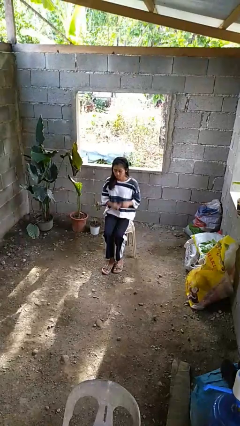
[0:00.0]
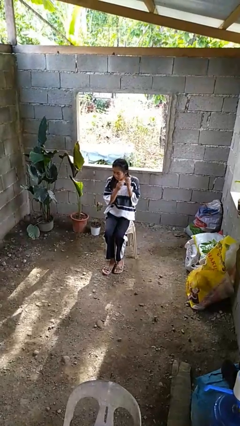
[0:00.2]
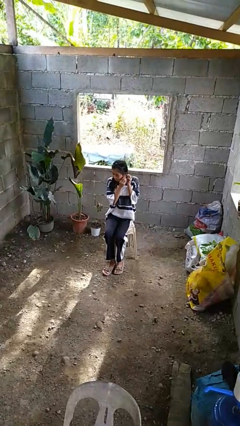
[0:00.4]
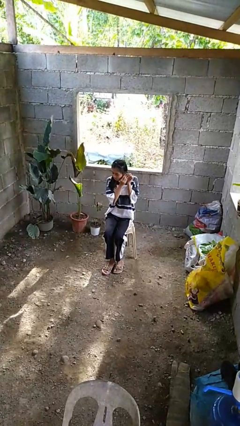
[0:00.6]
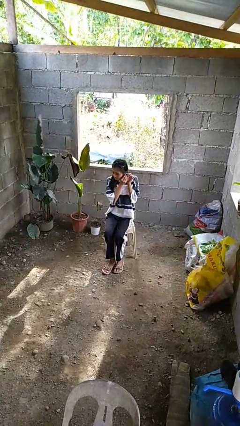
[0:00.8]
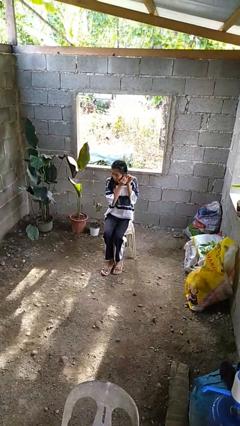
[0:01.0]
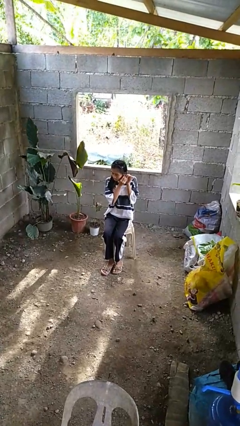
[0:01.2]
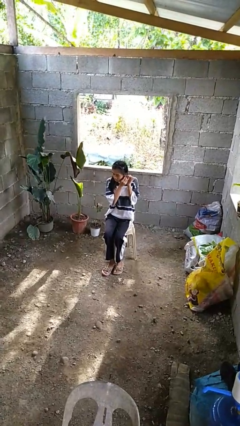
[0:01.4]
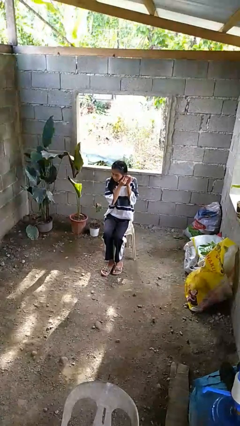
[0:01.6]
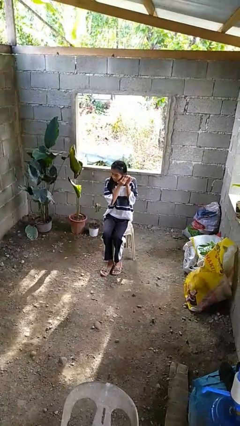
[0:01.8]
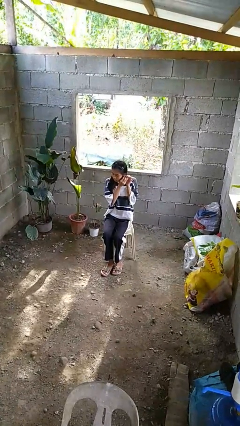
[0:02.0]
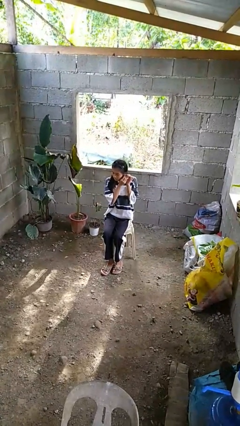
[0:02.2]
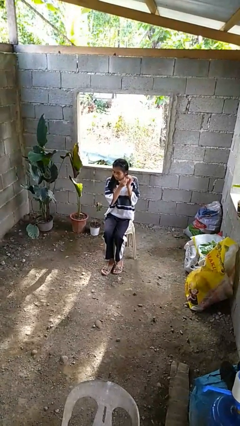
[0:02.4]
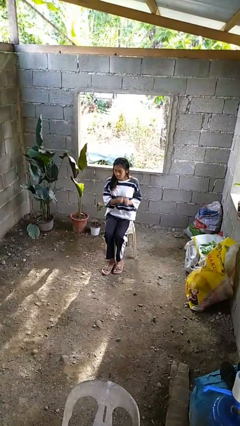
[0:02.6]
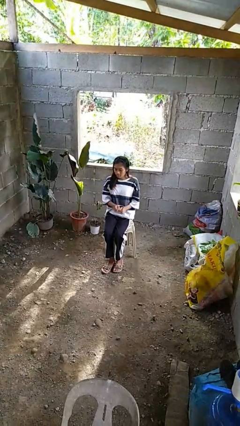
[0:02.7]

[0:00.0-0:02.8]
person puts on earrings

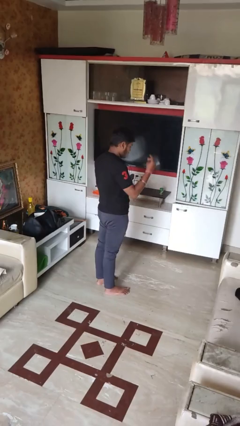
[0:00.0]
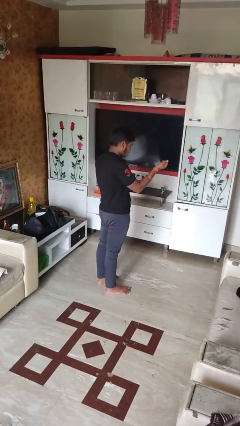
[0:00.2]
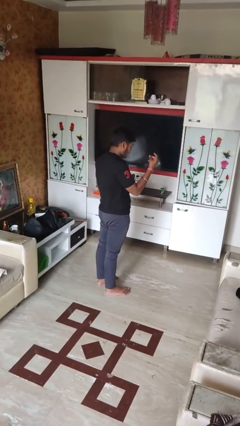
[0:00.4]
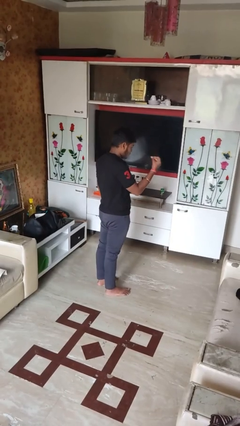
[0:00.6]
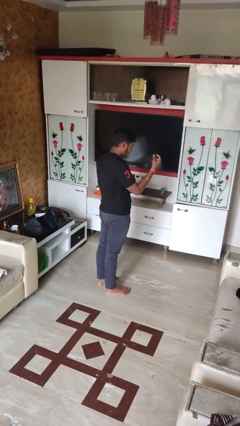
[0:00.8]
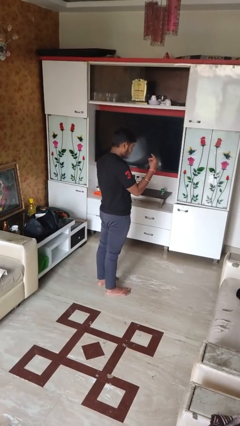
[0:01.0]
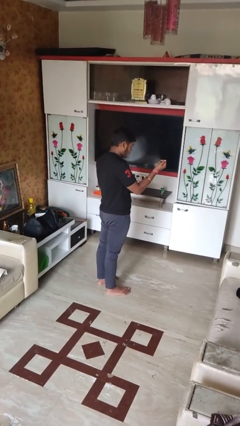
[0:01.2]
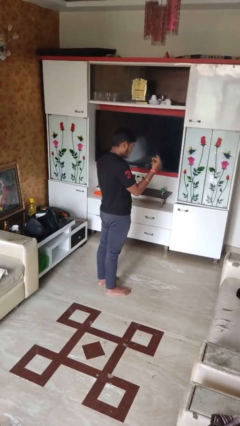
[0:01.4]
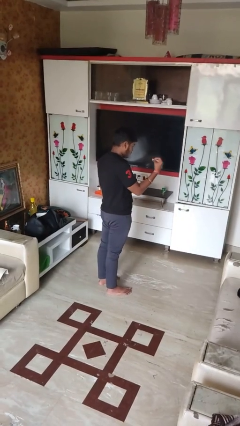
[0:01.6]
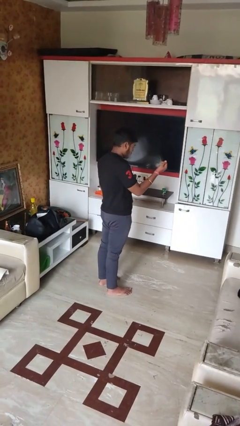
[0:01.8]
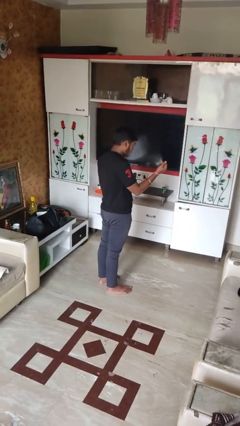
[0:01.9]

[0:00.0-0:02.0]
person snaps fingers

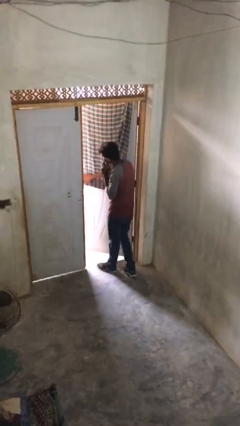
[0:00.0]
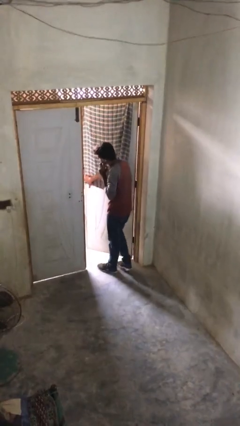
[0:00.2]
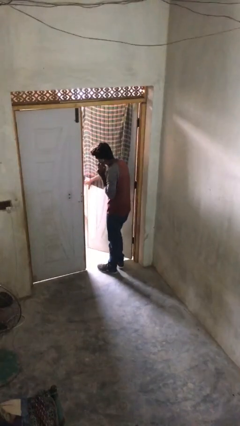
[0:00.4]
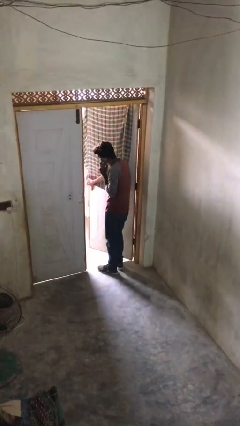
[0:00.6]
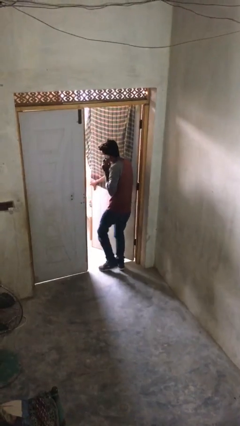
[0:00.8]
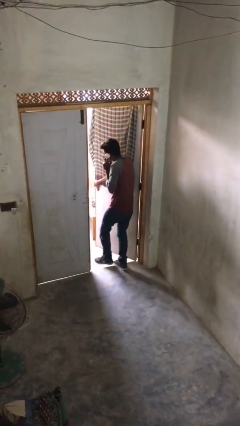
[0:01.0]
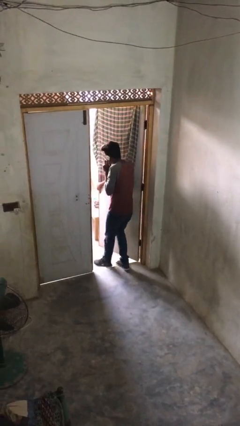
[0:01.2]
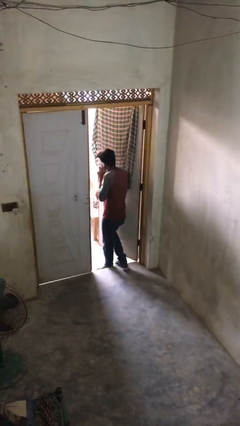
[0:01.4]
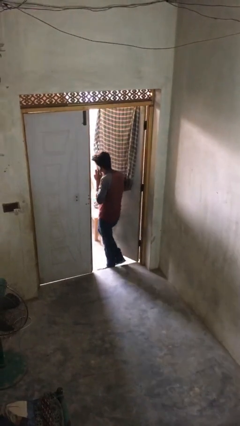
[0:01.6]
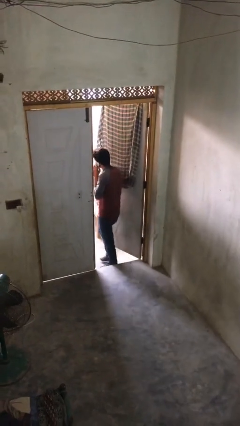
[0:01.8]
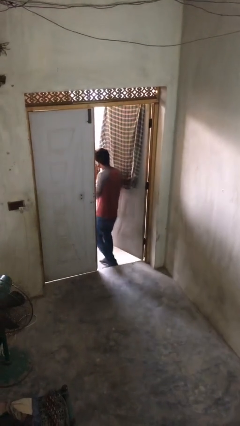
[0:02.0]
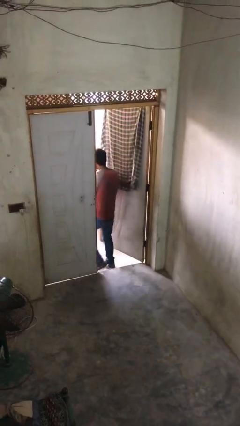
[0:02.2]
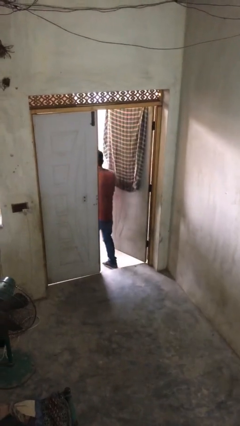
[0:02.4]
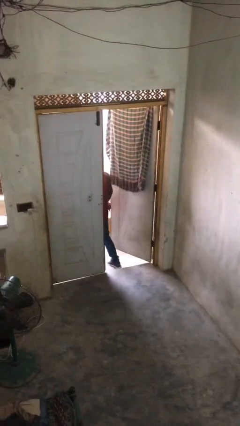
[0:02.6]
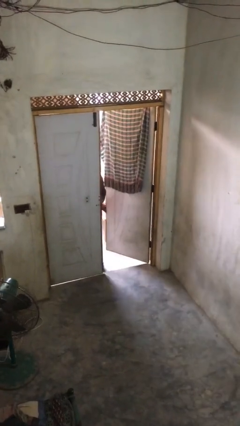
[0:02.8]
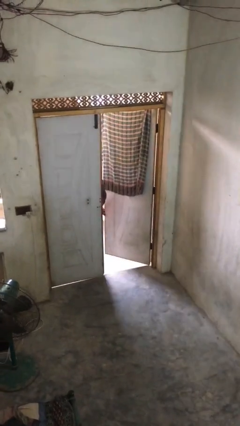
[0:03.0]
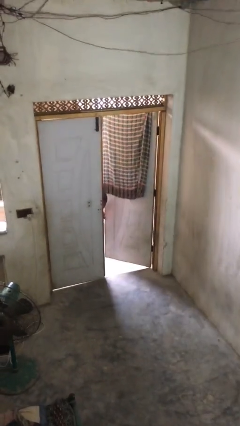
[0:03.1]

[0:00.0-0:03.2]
person exits scene through structure

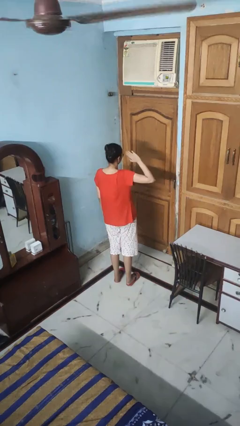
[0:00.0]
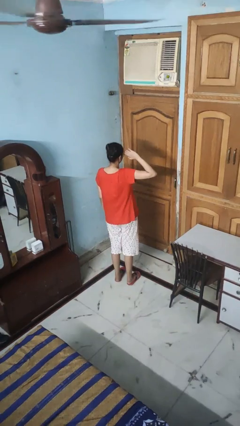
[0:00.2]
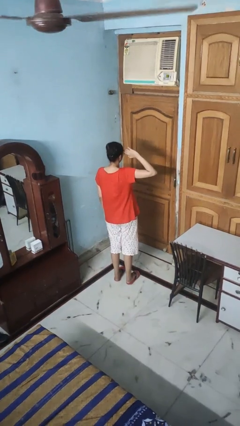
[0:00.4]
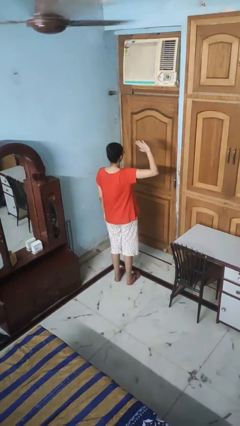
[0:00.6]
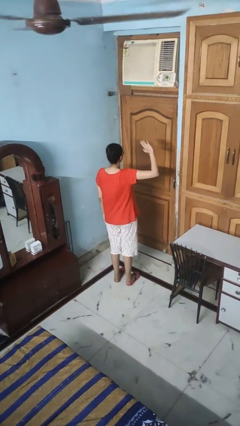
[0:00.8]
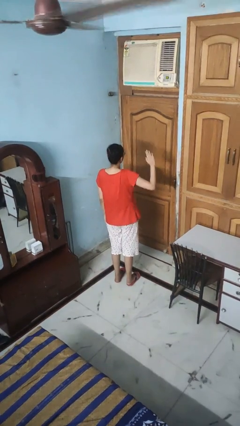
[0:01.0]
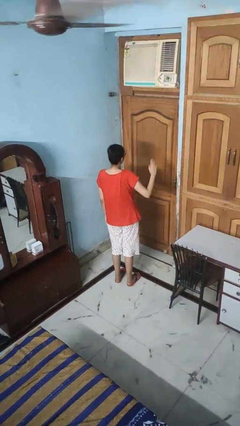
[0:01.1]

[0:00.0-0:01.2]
person salutes

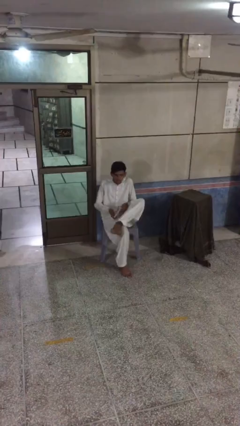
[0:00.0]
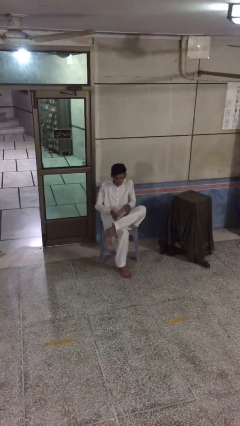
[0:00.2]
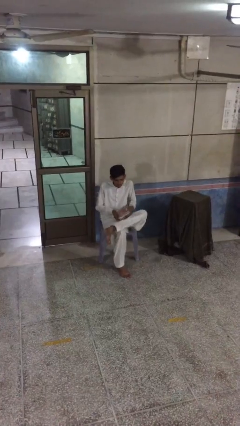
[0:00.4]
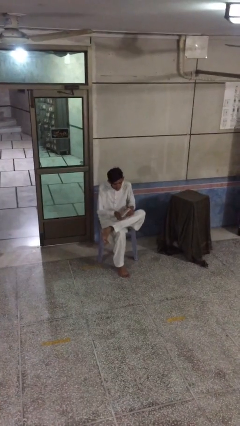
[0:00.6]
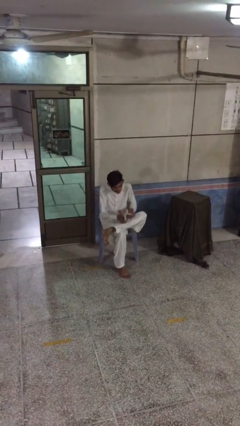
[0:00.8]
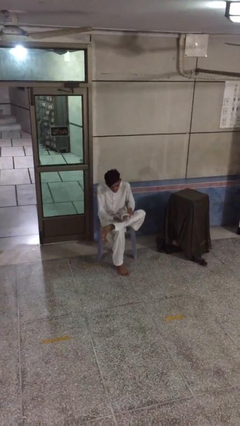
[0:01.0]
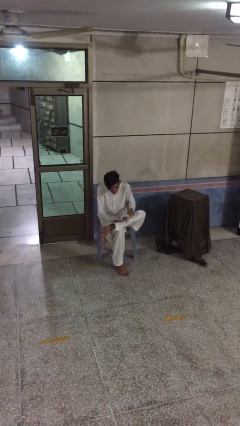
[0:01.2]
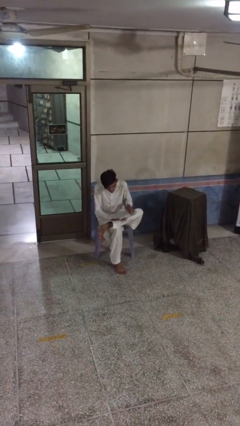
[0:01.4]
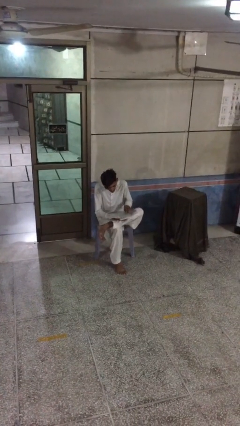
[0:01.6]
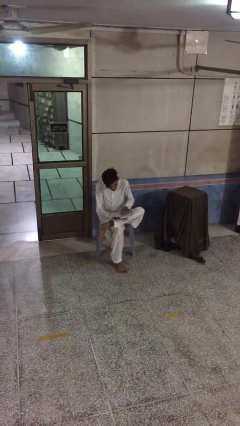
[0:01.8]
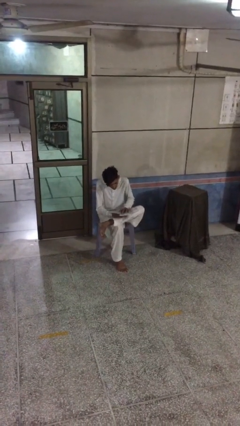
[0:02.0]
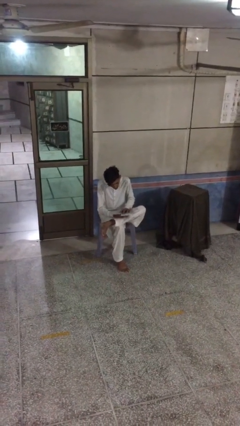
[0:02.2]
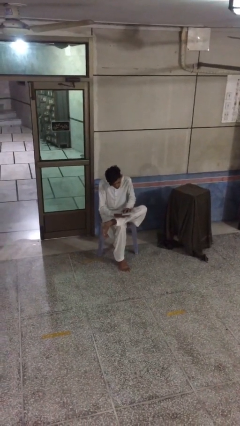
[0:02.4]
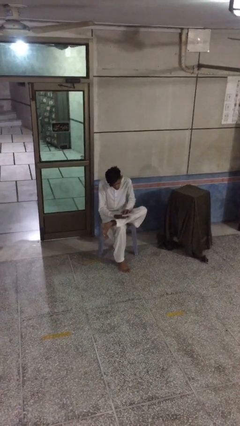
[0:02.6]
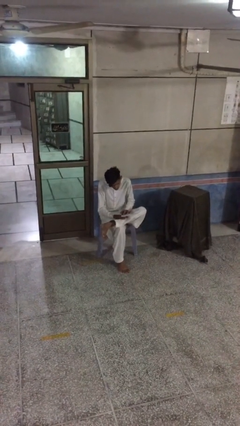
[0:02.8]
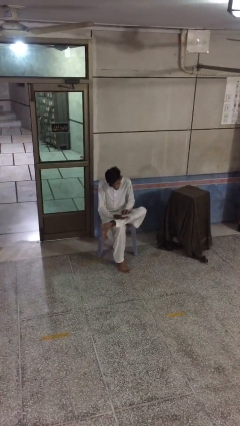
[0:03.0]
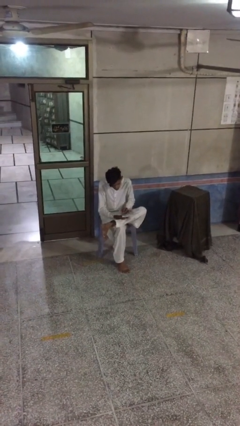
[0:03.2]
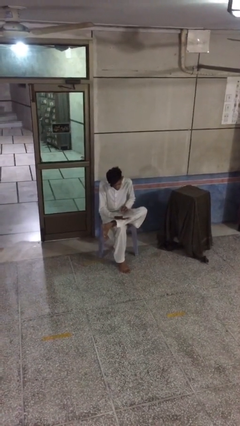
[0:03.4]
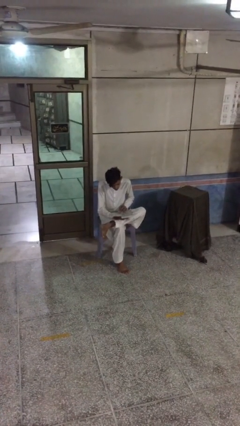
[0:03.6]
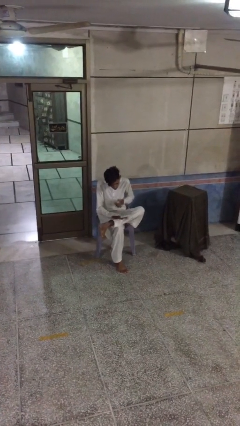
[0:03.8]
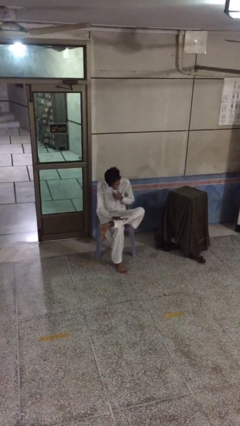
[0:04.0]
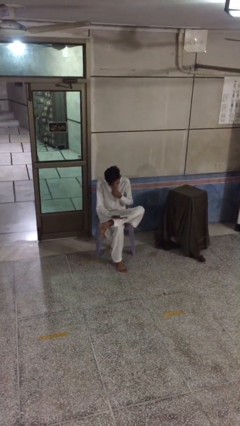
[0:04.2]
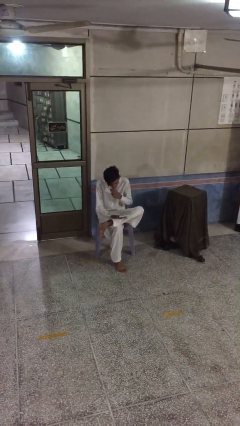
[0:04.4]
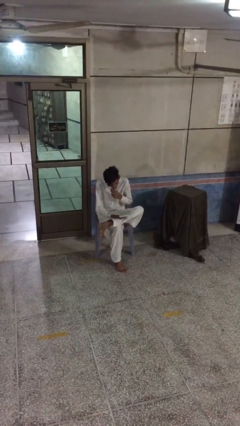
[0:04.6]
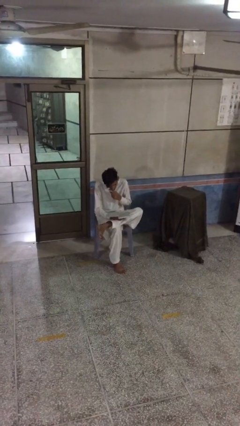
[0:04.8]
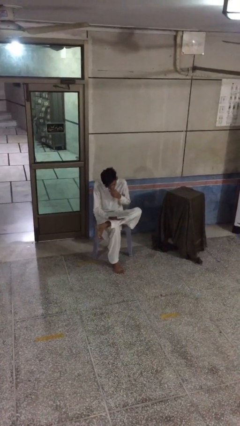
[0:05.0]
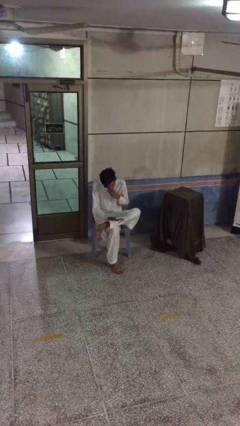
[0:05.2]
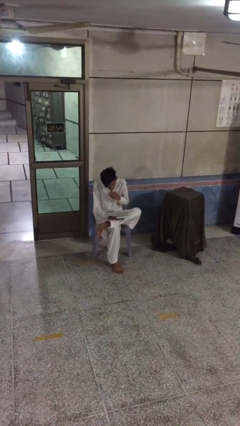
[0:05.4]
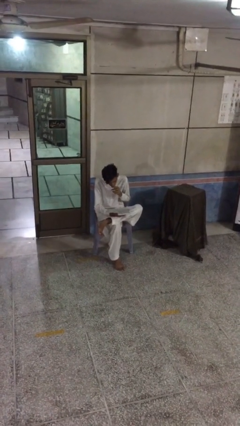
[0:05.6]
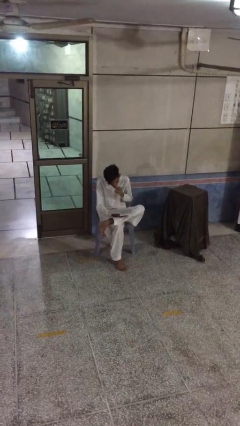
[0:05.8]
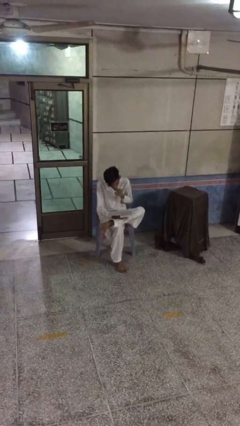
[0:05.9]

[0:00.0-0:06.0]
person reads document

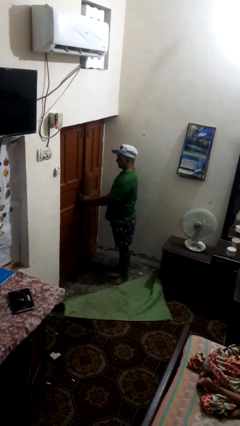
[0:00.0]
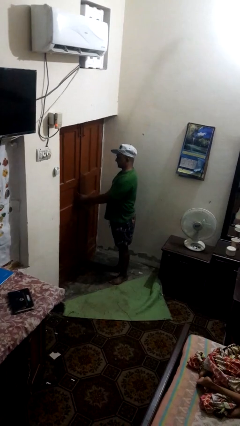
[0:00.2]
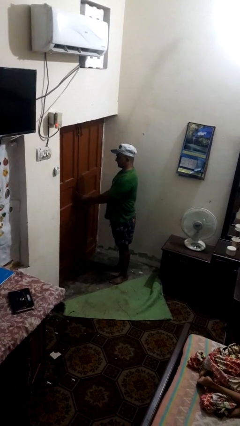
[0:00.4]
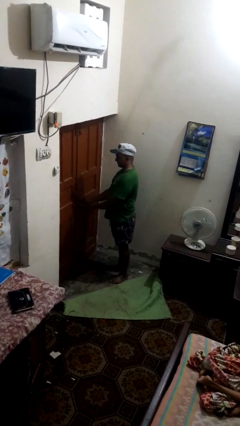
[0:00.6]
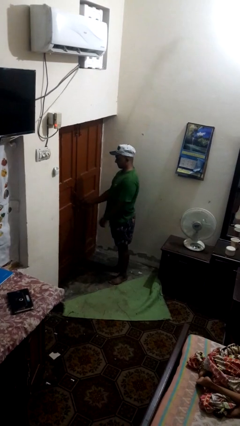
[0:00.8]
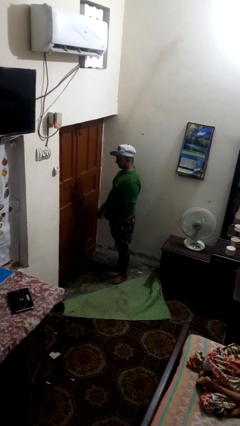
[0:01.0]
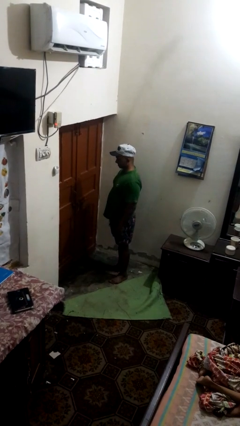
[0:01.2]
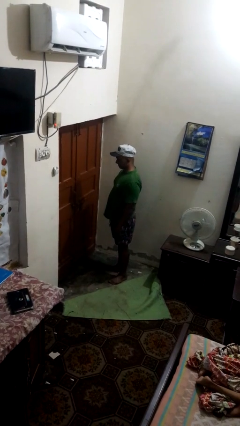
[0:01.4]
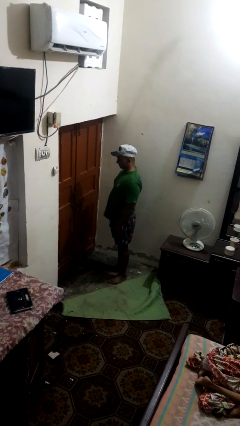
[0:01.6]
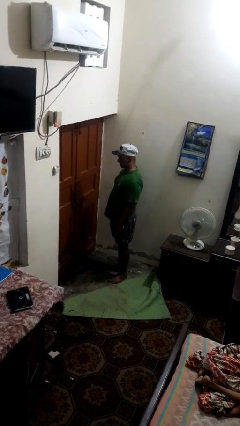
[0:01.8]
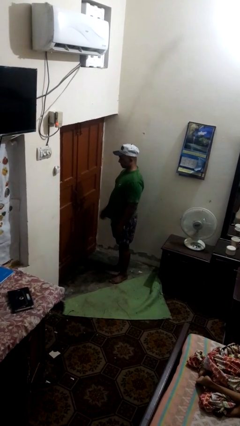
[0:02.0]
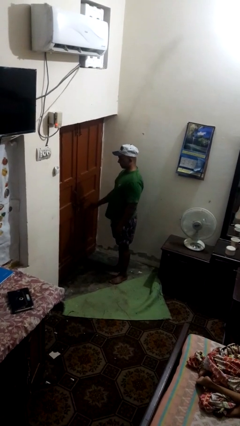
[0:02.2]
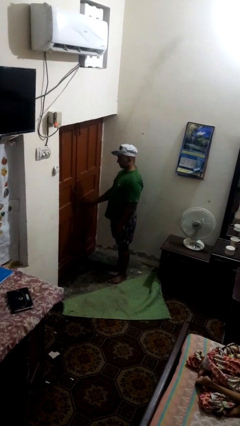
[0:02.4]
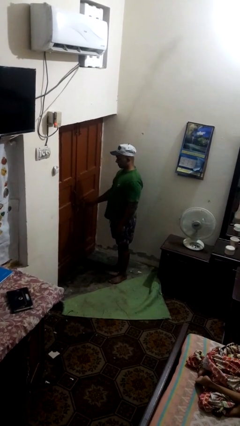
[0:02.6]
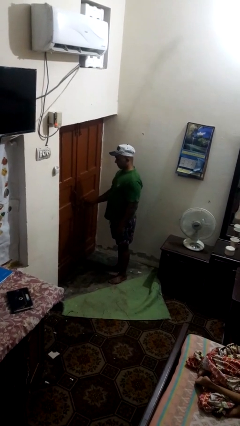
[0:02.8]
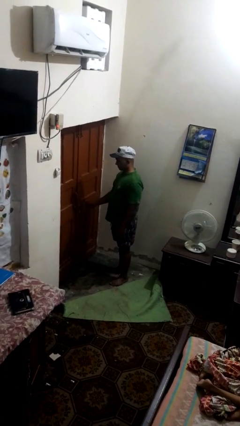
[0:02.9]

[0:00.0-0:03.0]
person closes facility door
